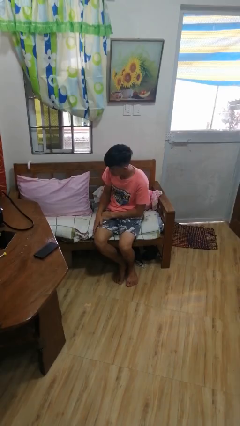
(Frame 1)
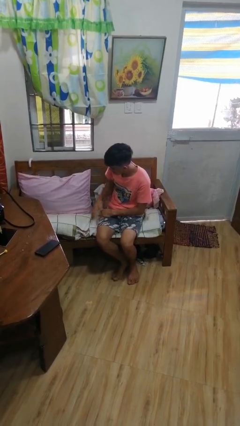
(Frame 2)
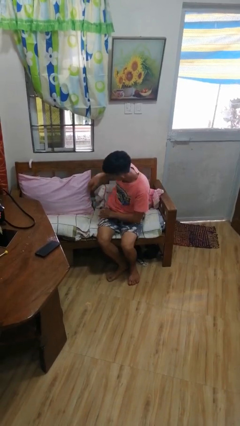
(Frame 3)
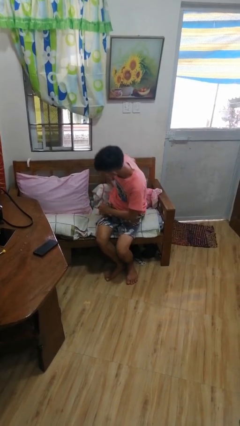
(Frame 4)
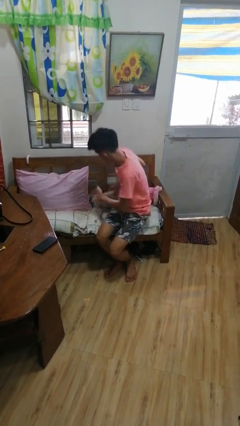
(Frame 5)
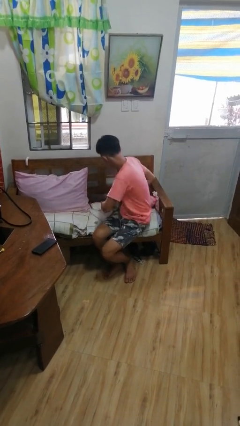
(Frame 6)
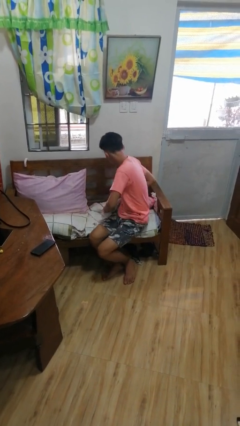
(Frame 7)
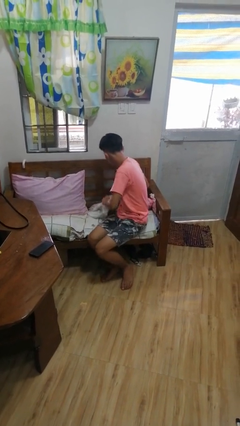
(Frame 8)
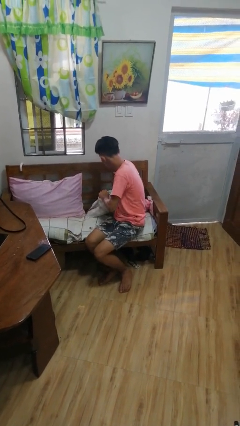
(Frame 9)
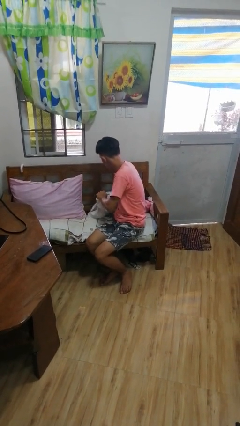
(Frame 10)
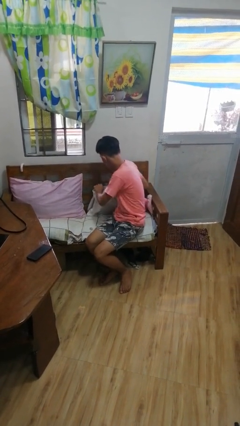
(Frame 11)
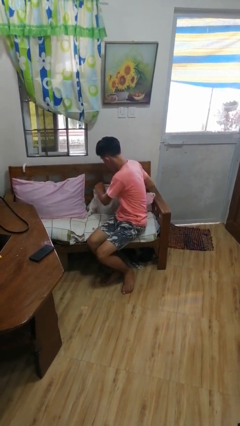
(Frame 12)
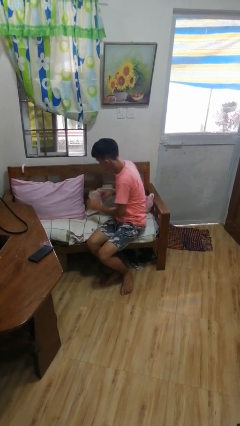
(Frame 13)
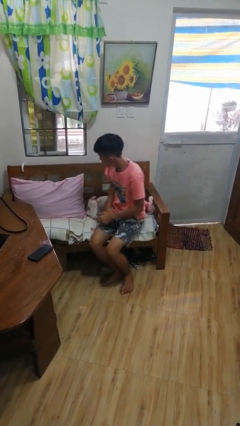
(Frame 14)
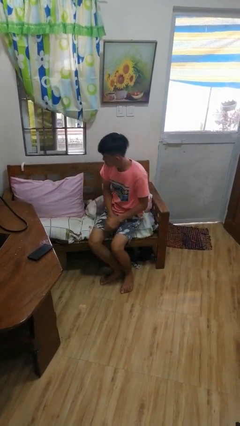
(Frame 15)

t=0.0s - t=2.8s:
person searches in couch

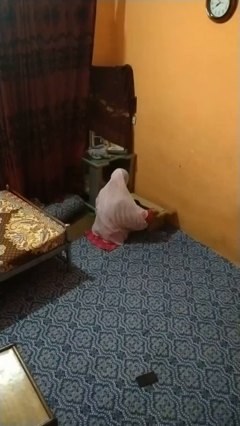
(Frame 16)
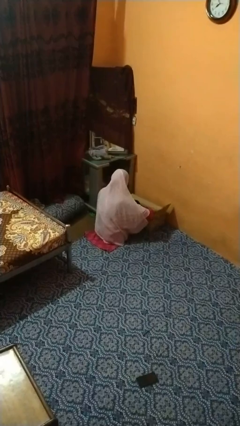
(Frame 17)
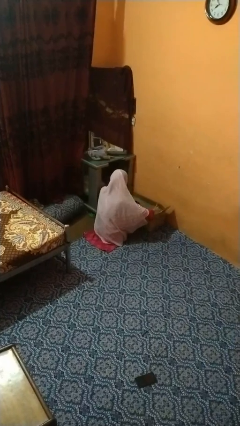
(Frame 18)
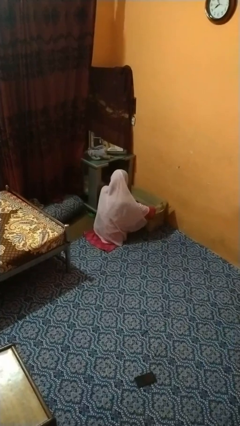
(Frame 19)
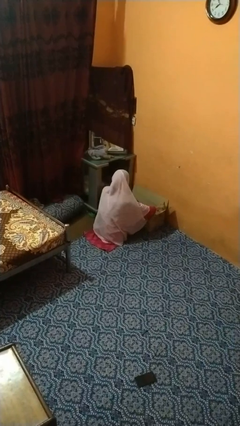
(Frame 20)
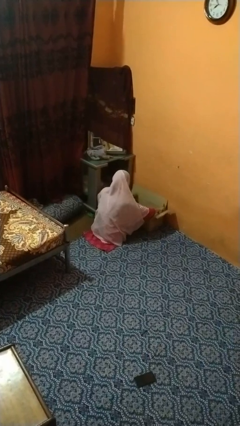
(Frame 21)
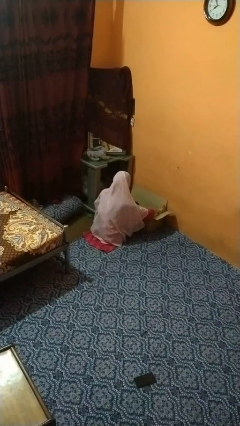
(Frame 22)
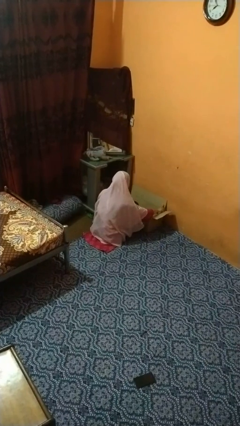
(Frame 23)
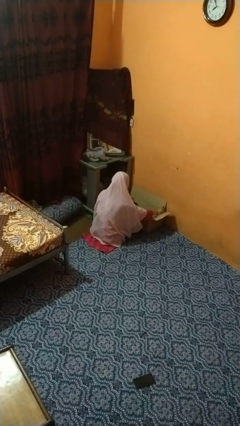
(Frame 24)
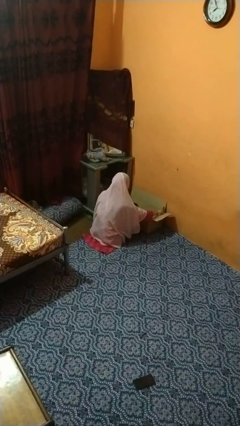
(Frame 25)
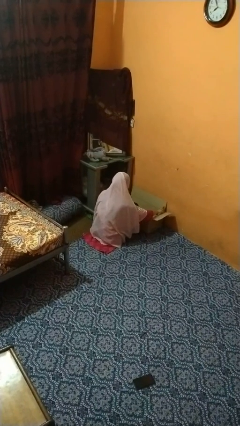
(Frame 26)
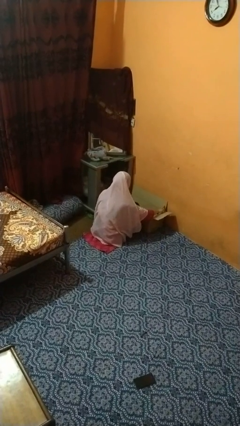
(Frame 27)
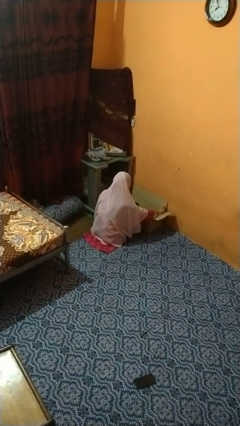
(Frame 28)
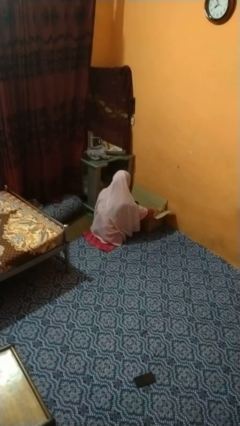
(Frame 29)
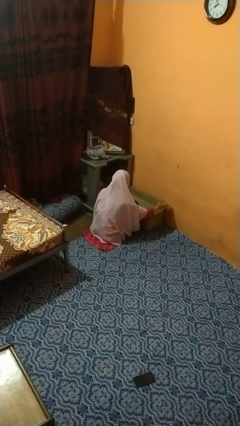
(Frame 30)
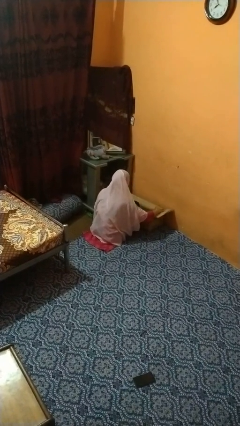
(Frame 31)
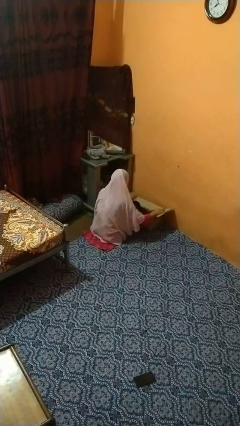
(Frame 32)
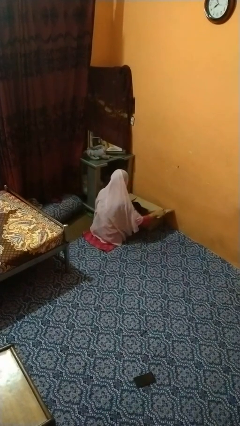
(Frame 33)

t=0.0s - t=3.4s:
person opens box

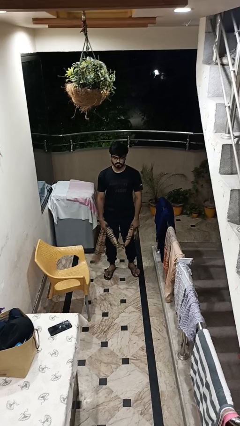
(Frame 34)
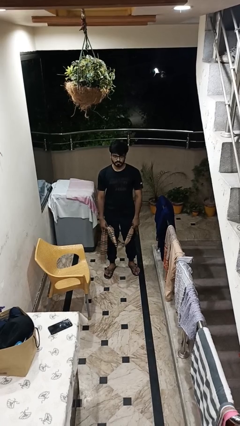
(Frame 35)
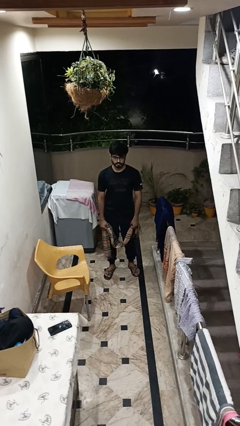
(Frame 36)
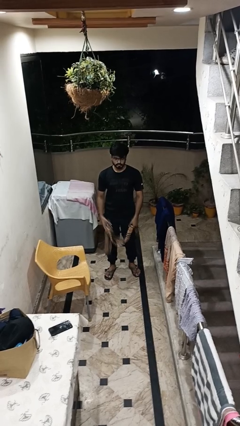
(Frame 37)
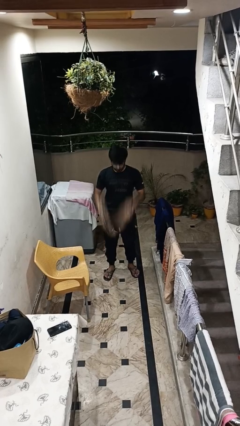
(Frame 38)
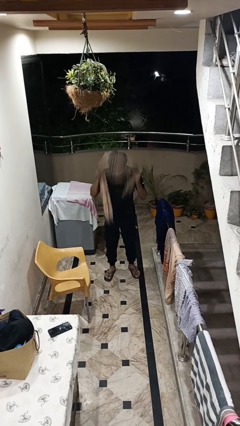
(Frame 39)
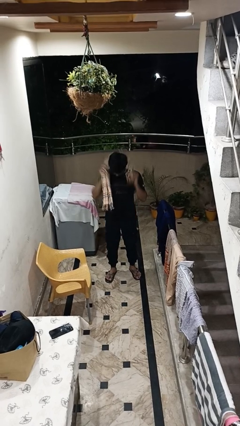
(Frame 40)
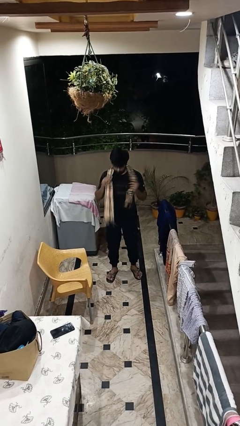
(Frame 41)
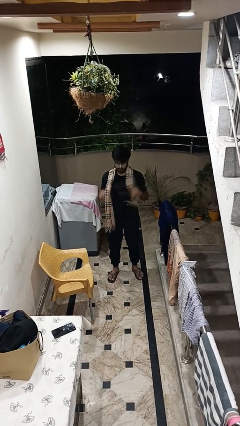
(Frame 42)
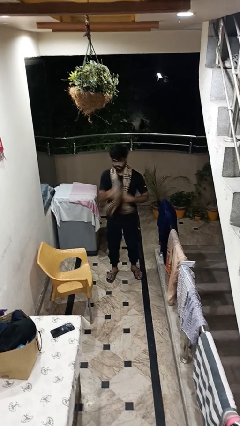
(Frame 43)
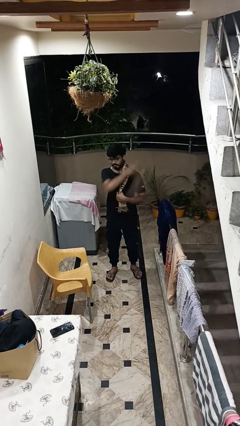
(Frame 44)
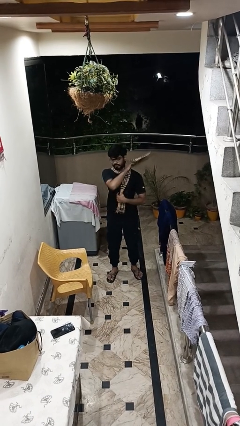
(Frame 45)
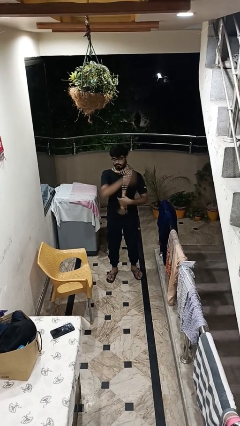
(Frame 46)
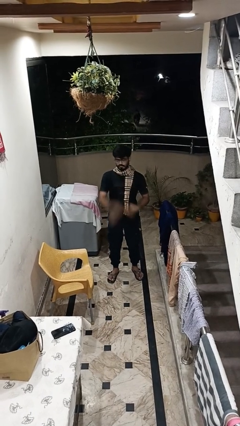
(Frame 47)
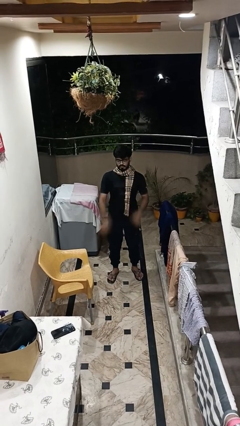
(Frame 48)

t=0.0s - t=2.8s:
person puts on scarf

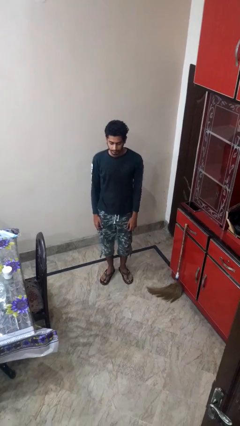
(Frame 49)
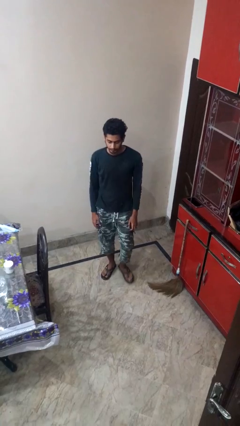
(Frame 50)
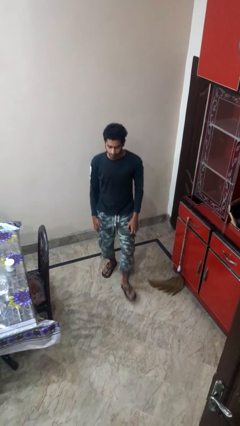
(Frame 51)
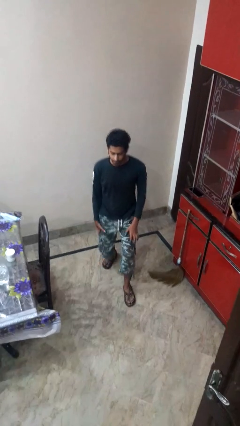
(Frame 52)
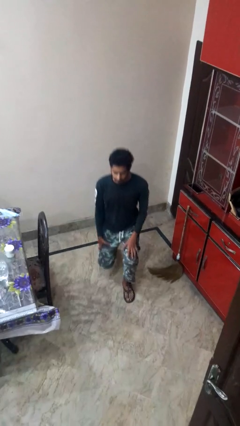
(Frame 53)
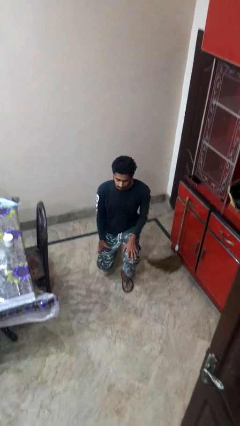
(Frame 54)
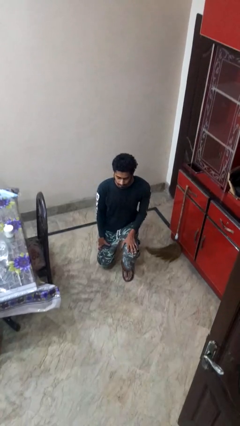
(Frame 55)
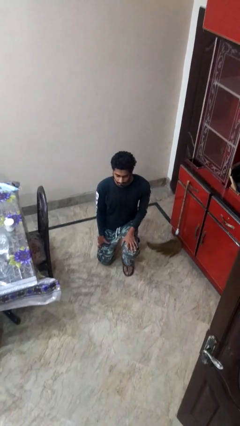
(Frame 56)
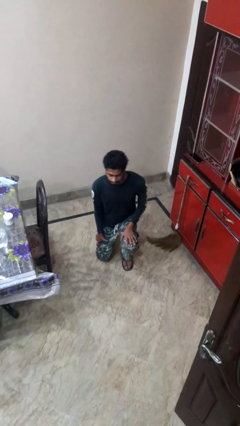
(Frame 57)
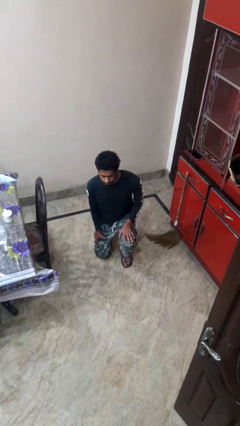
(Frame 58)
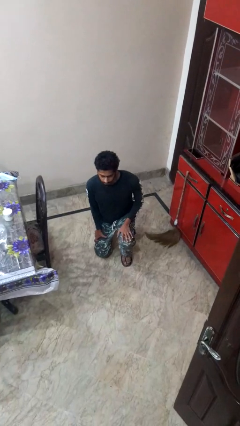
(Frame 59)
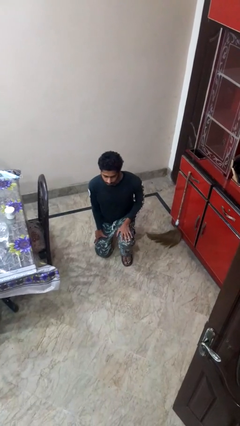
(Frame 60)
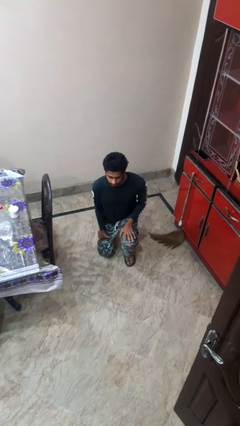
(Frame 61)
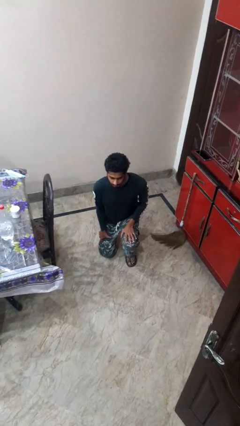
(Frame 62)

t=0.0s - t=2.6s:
person kneels

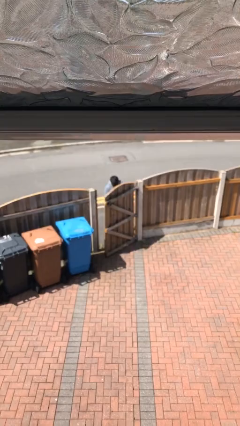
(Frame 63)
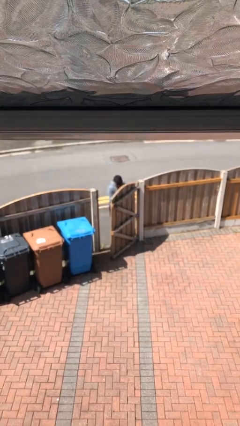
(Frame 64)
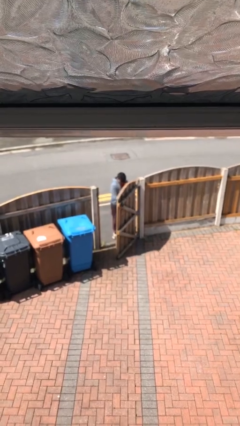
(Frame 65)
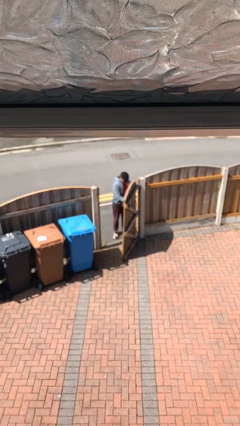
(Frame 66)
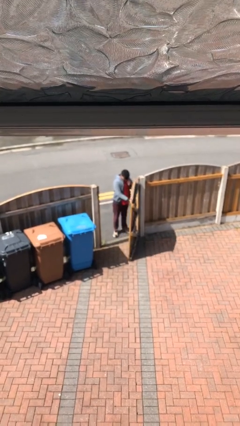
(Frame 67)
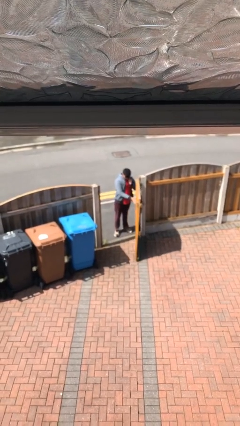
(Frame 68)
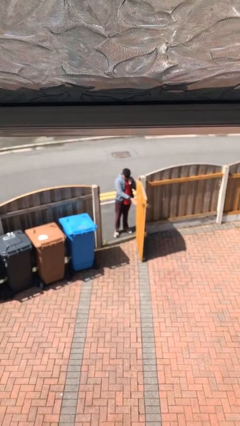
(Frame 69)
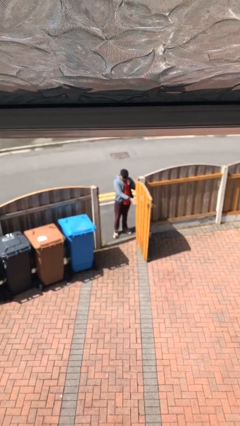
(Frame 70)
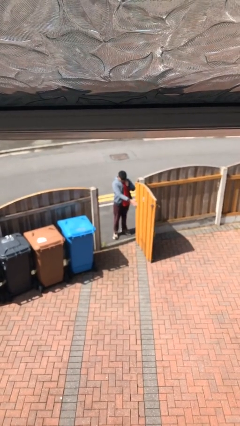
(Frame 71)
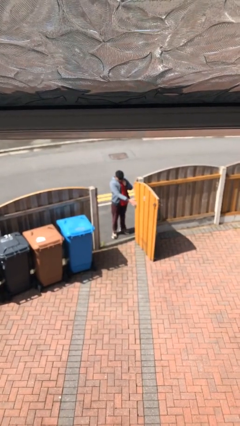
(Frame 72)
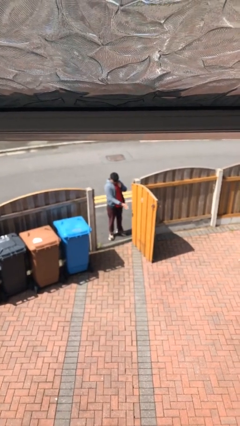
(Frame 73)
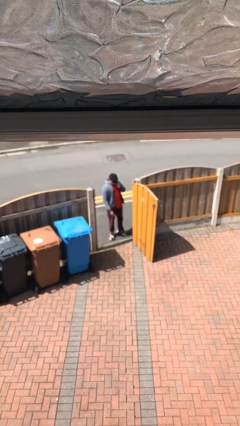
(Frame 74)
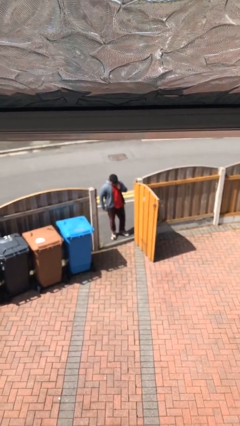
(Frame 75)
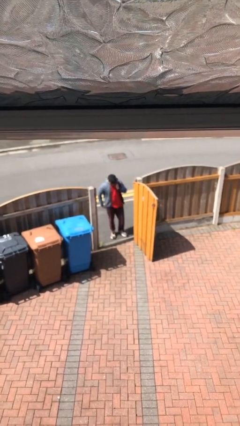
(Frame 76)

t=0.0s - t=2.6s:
person opens facility door

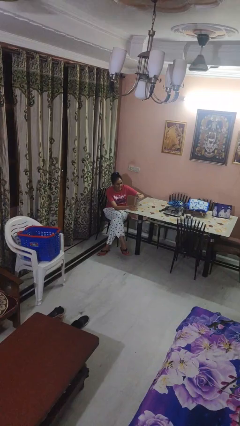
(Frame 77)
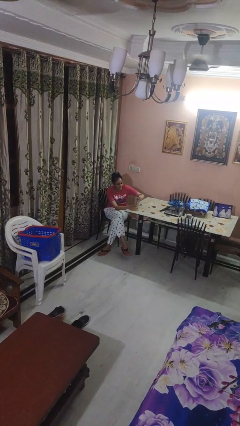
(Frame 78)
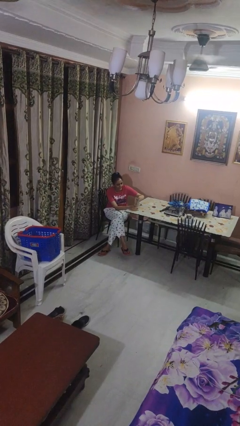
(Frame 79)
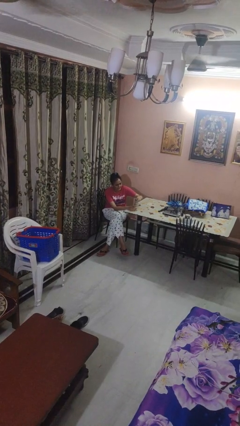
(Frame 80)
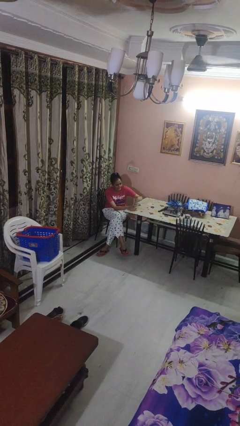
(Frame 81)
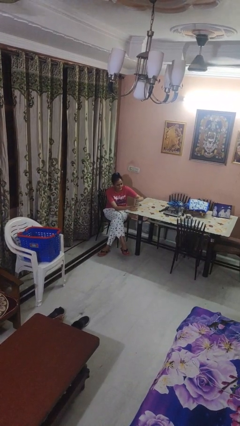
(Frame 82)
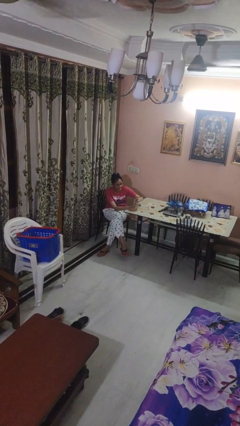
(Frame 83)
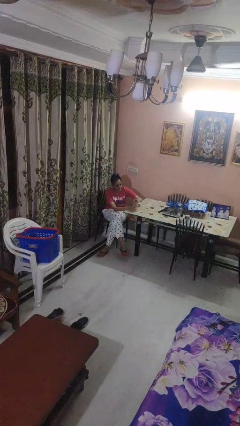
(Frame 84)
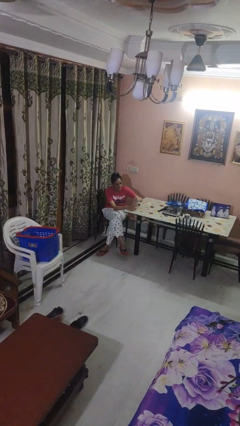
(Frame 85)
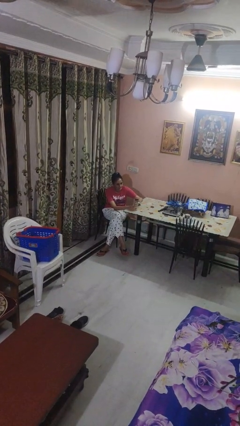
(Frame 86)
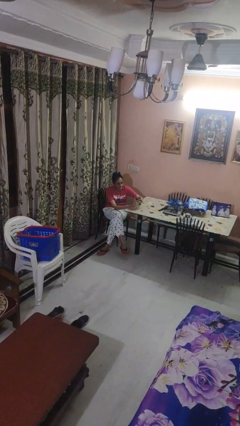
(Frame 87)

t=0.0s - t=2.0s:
person screws lid to bottle

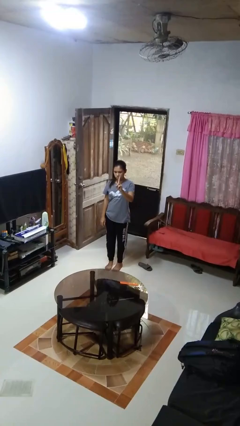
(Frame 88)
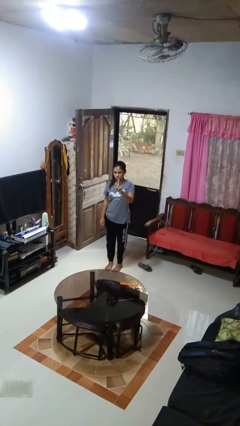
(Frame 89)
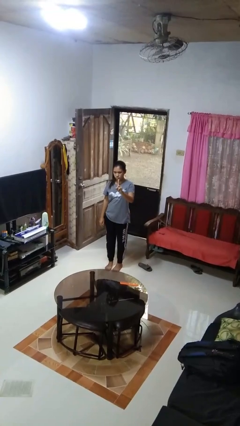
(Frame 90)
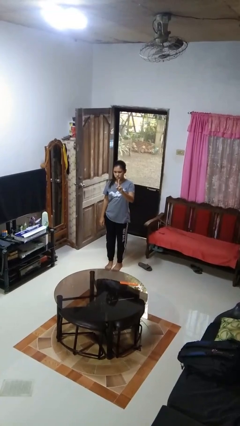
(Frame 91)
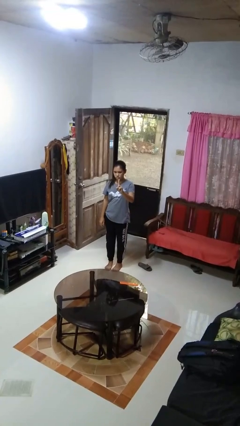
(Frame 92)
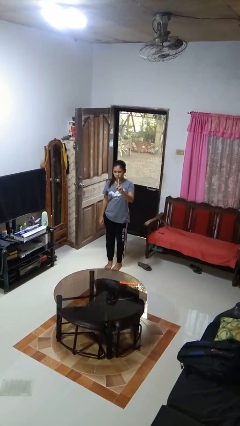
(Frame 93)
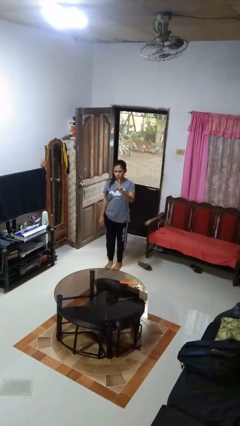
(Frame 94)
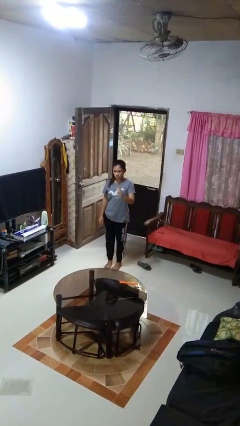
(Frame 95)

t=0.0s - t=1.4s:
person gestures number one
